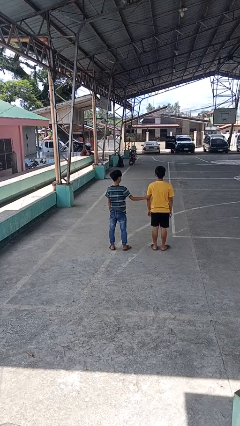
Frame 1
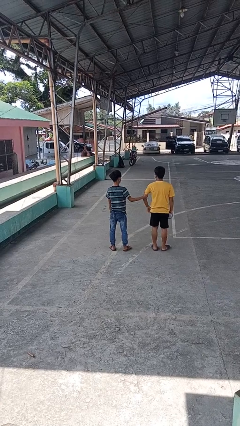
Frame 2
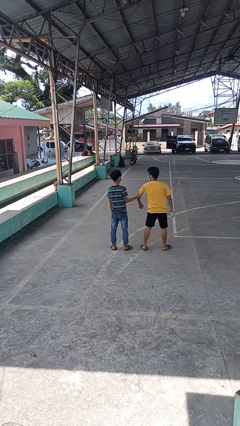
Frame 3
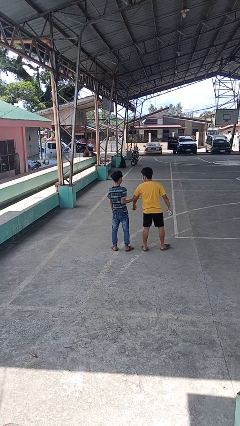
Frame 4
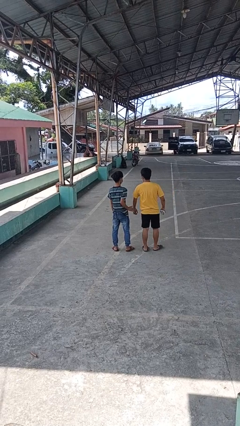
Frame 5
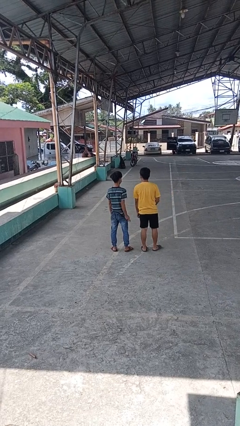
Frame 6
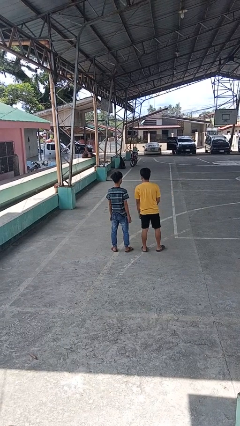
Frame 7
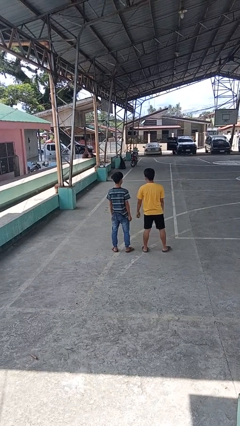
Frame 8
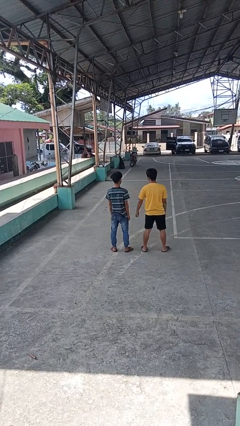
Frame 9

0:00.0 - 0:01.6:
person grabs person by bicep

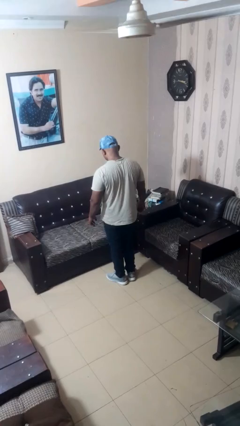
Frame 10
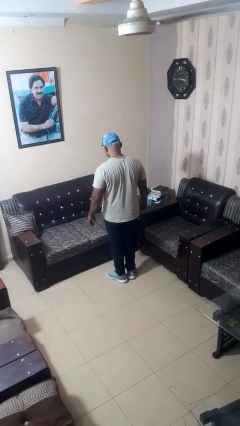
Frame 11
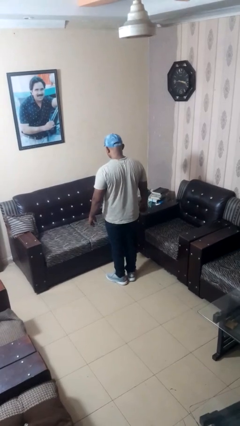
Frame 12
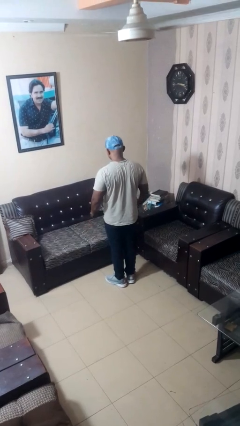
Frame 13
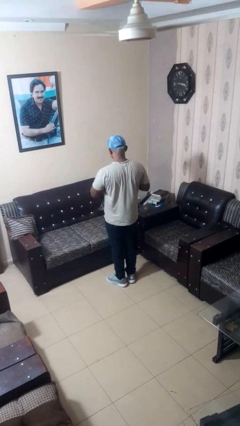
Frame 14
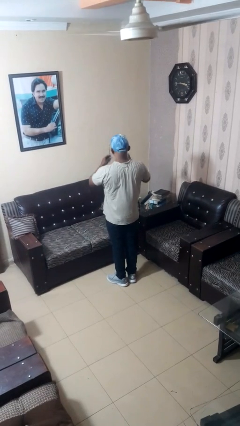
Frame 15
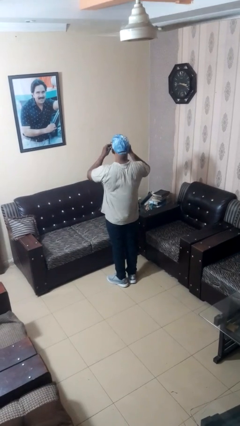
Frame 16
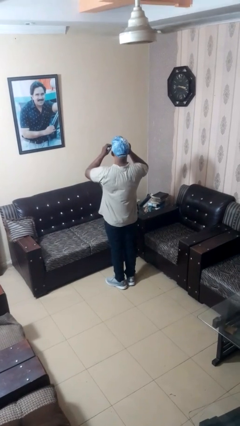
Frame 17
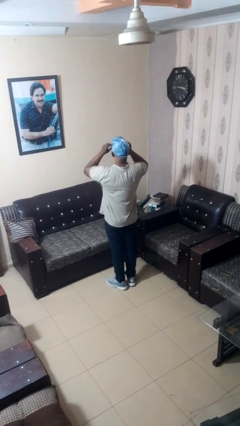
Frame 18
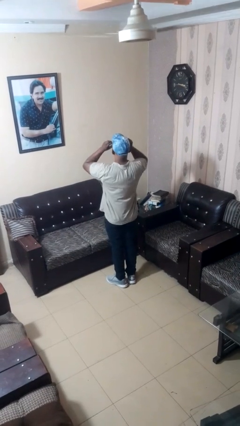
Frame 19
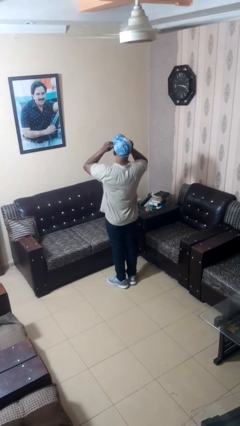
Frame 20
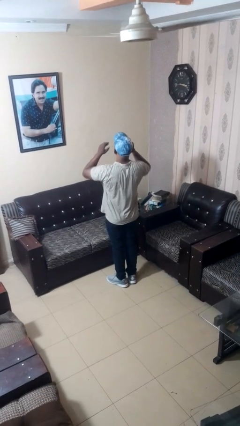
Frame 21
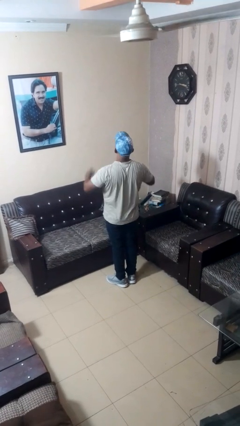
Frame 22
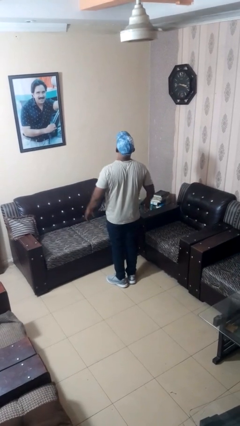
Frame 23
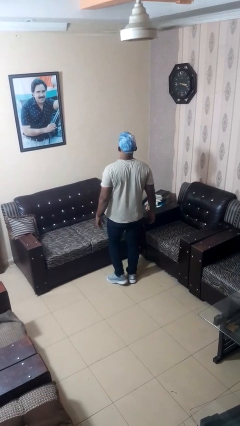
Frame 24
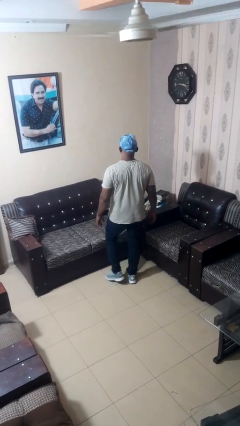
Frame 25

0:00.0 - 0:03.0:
person puts on glasses

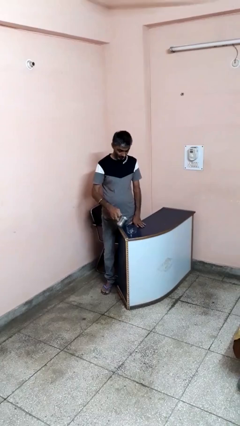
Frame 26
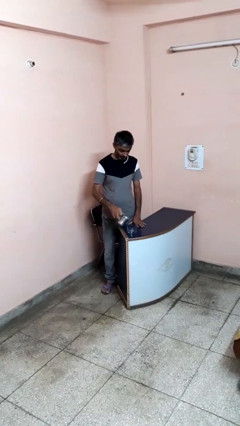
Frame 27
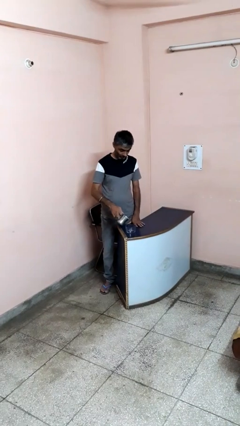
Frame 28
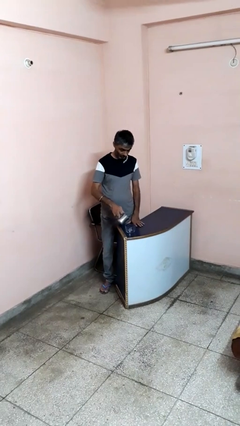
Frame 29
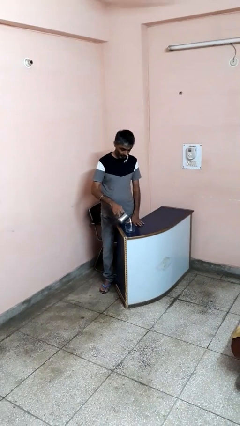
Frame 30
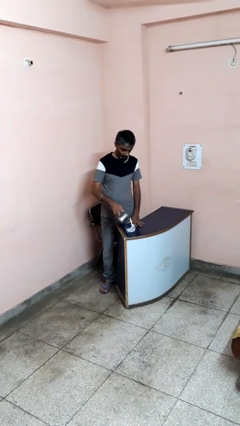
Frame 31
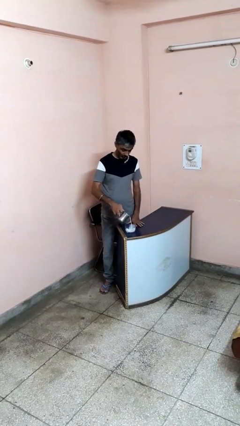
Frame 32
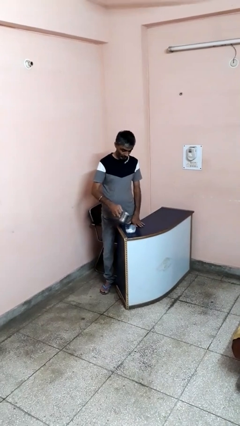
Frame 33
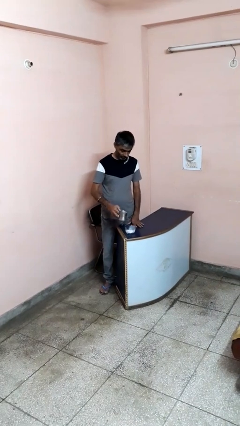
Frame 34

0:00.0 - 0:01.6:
person pours into bowl

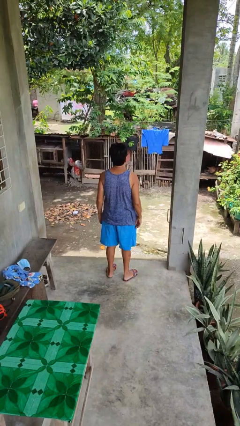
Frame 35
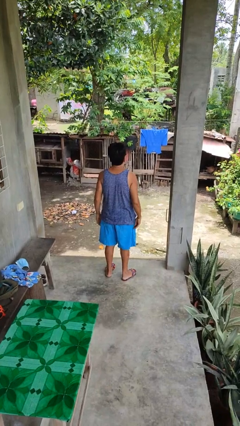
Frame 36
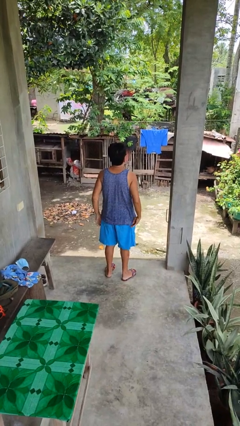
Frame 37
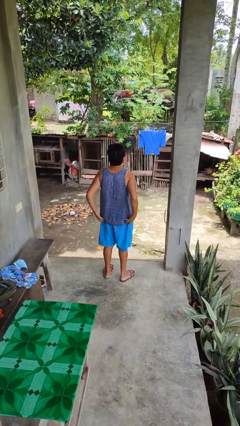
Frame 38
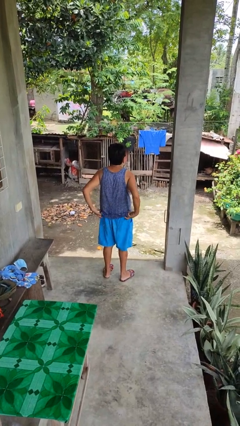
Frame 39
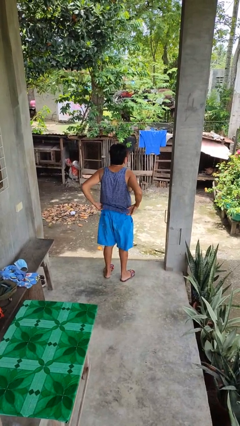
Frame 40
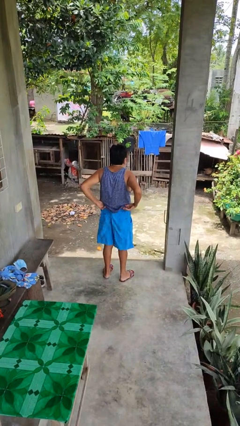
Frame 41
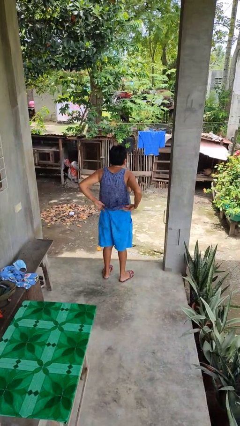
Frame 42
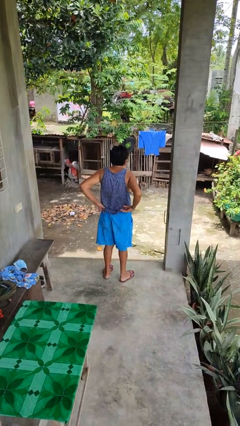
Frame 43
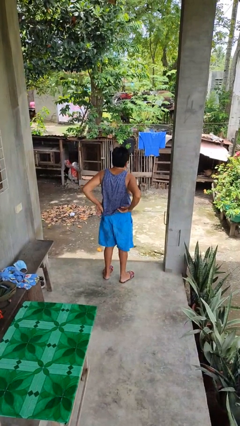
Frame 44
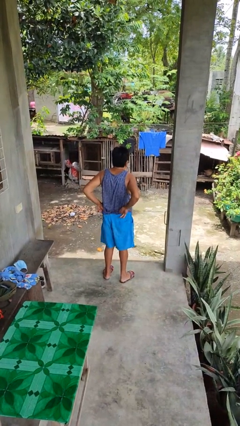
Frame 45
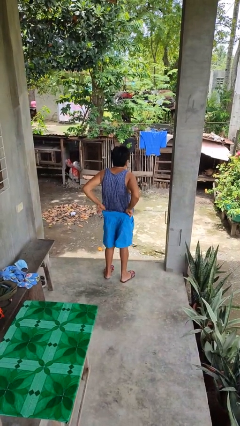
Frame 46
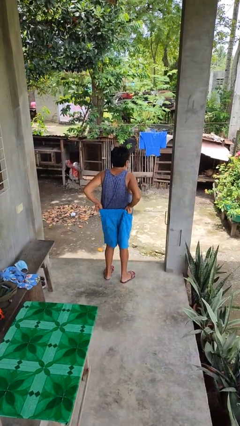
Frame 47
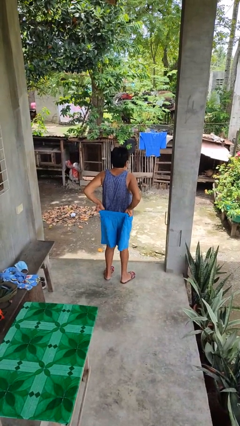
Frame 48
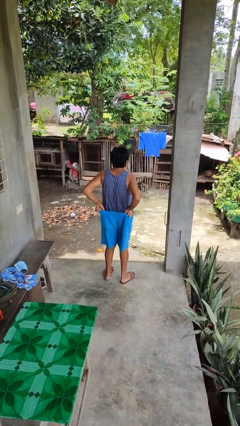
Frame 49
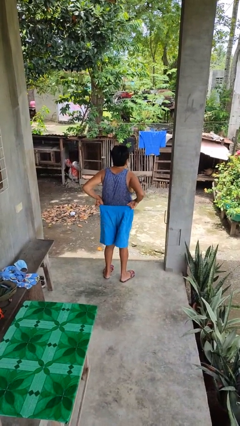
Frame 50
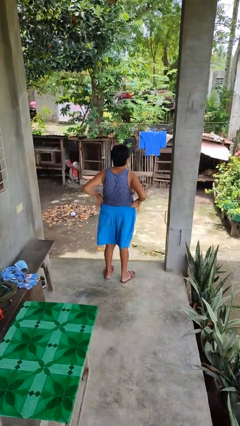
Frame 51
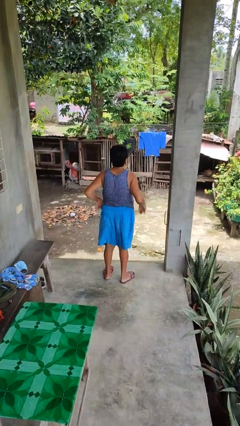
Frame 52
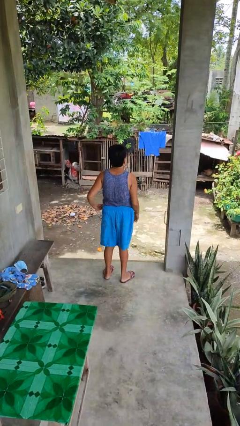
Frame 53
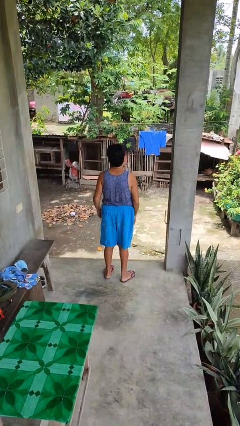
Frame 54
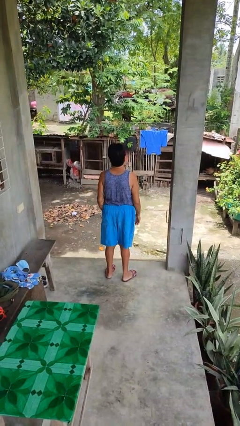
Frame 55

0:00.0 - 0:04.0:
person tucks in shirt

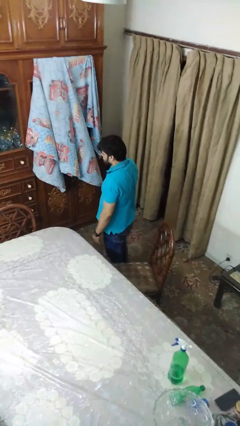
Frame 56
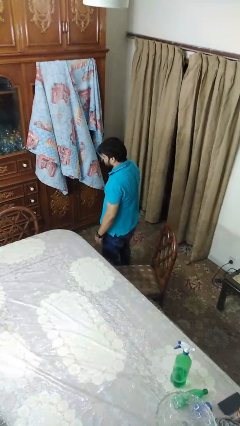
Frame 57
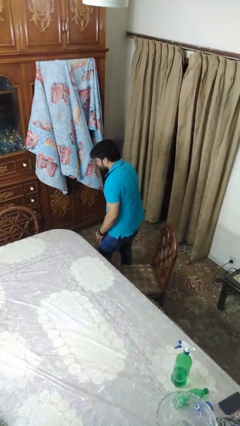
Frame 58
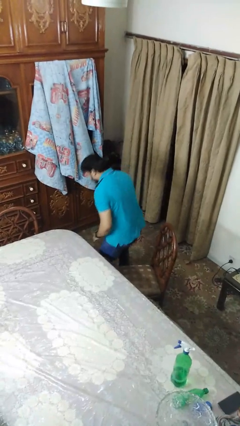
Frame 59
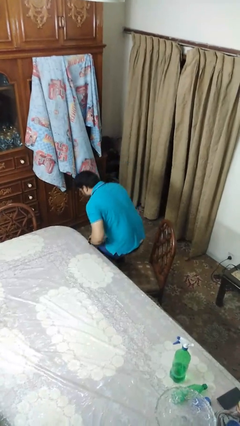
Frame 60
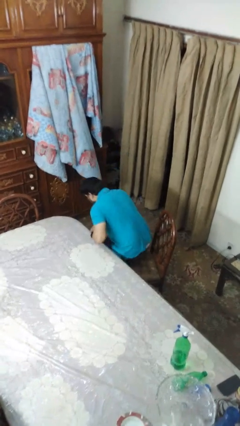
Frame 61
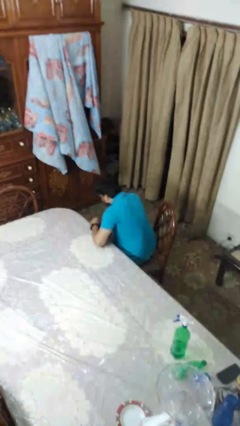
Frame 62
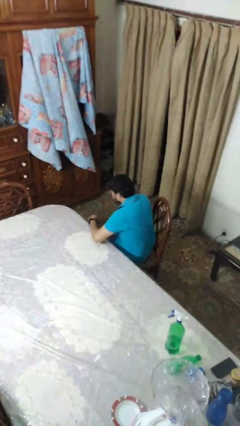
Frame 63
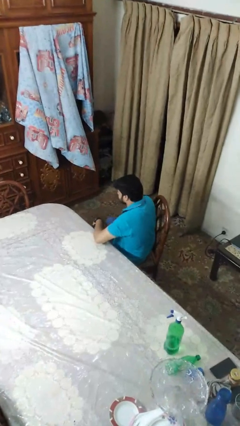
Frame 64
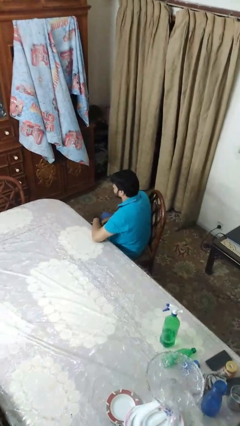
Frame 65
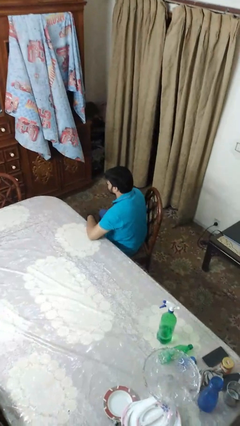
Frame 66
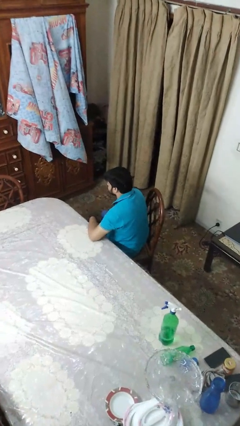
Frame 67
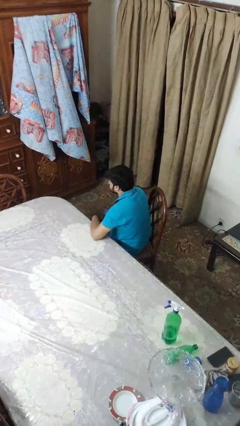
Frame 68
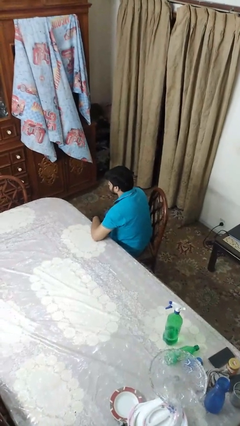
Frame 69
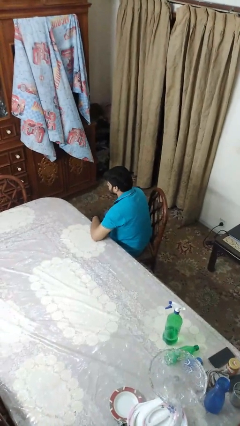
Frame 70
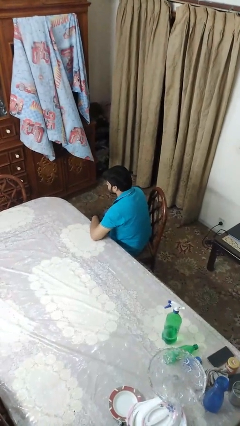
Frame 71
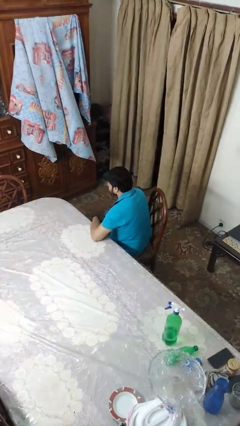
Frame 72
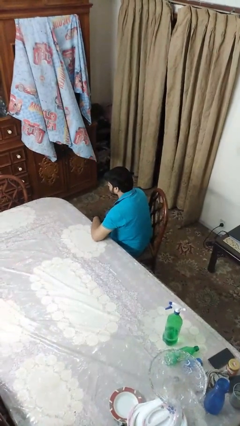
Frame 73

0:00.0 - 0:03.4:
person sits down

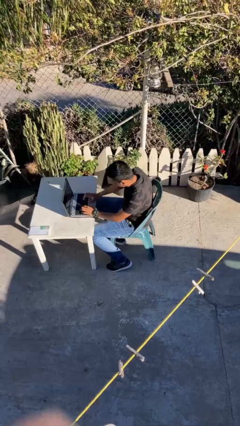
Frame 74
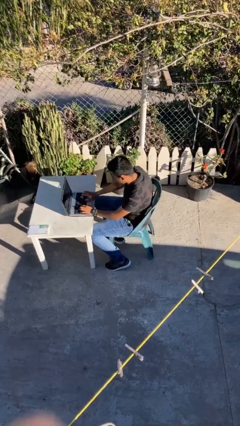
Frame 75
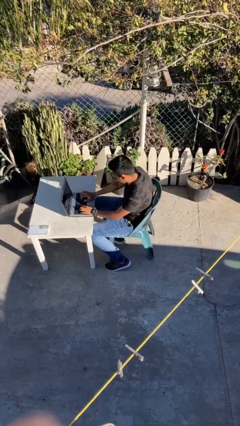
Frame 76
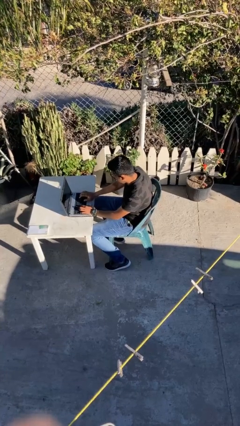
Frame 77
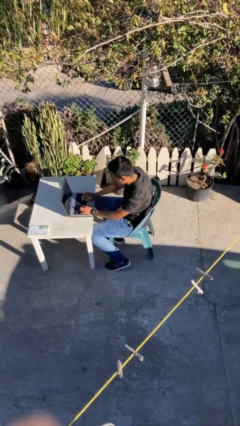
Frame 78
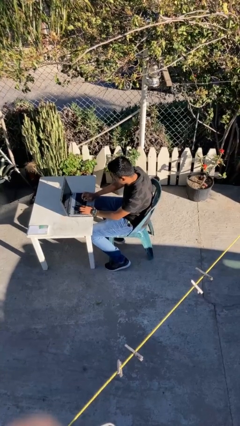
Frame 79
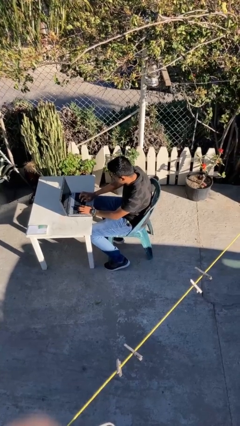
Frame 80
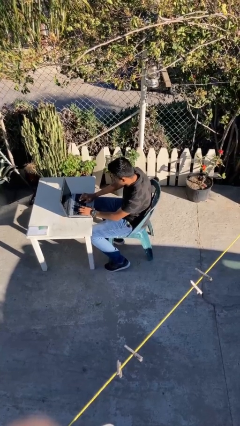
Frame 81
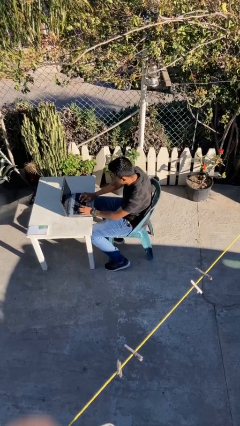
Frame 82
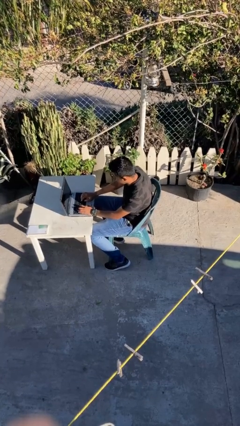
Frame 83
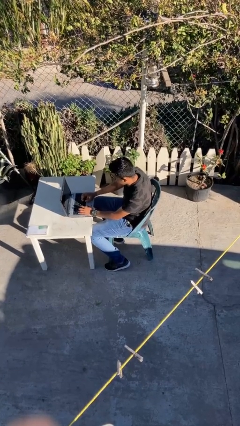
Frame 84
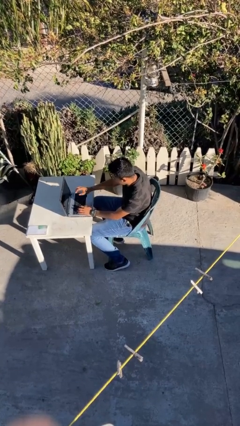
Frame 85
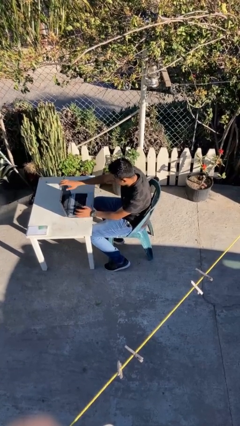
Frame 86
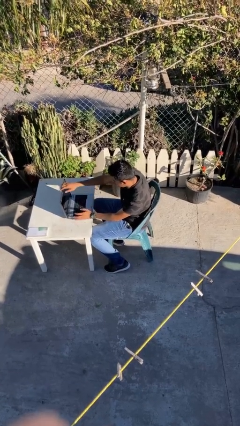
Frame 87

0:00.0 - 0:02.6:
person interacts with laptop

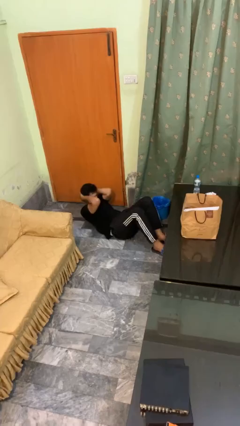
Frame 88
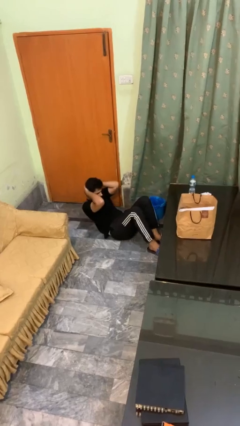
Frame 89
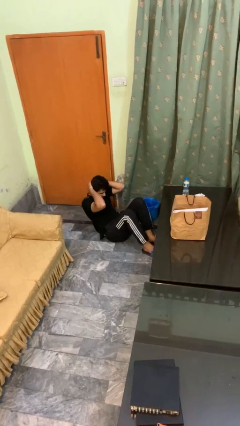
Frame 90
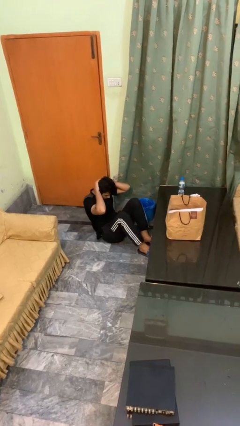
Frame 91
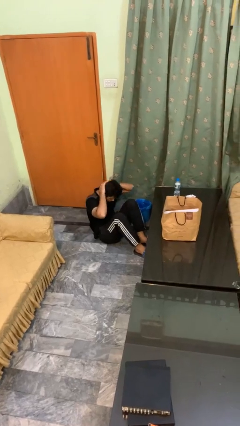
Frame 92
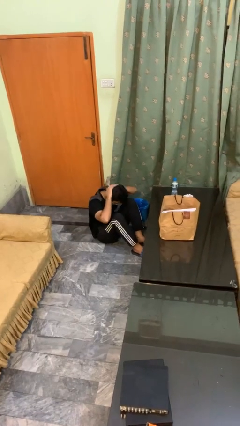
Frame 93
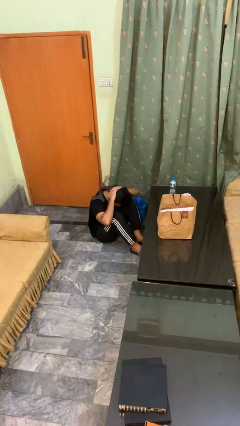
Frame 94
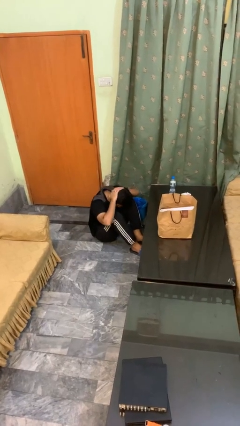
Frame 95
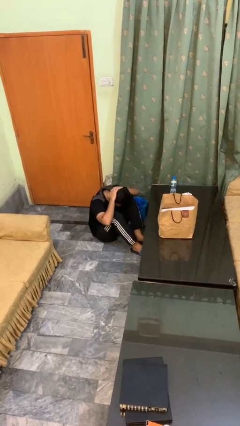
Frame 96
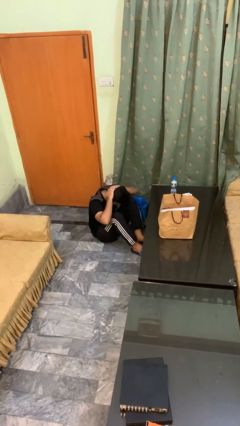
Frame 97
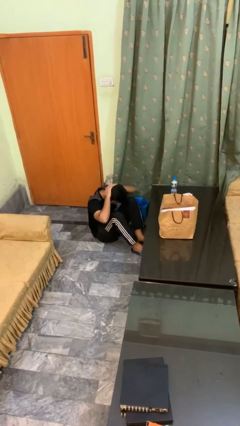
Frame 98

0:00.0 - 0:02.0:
person exercises with situp
